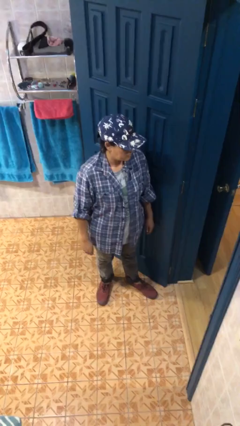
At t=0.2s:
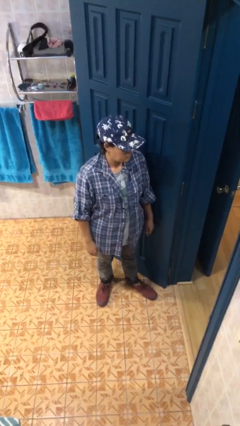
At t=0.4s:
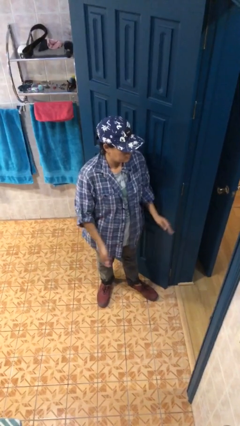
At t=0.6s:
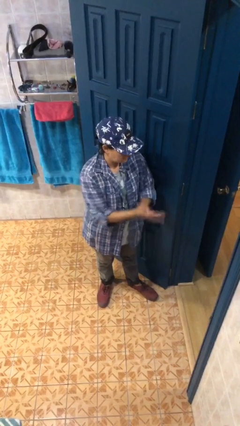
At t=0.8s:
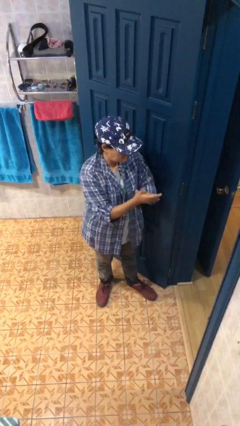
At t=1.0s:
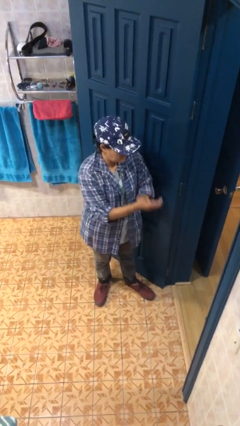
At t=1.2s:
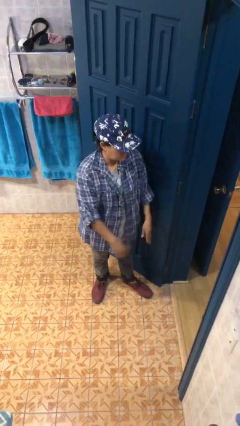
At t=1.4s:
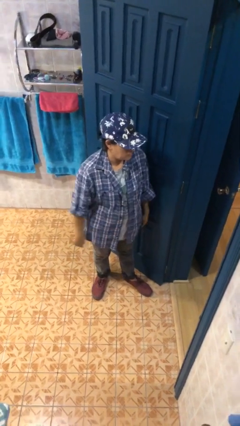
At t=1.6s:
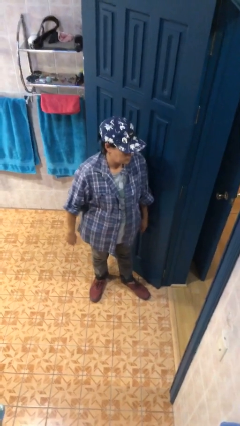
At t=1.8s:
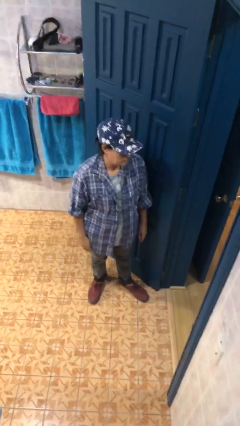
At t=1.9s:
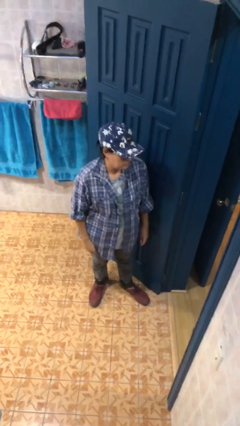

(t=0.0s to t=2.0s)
person claps hands

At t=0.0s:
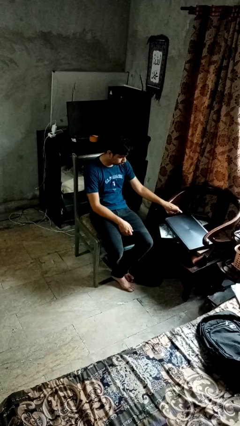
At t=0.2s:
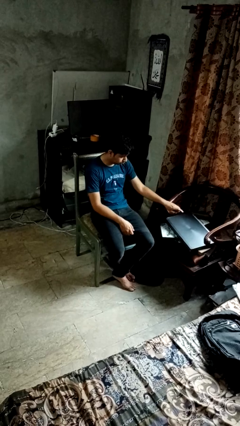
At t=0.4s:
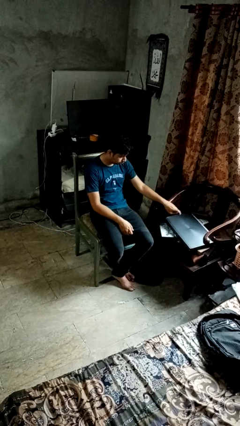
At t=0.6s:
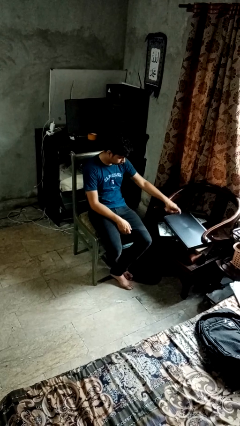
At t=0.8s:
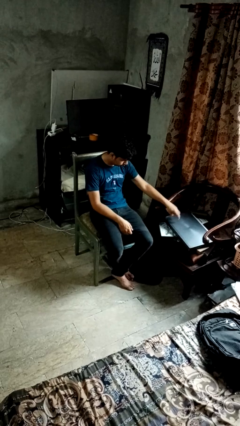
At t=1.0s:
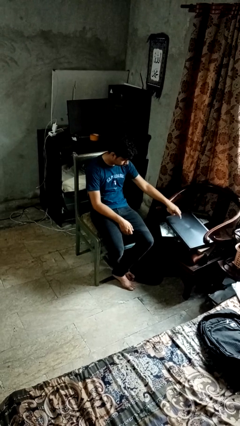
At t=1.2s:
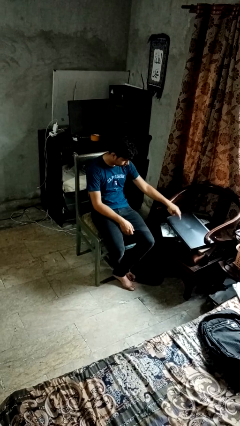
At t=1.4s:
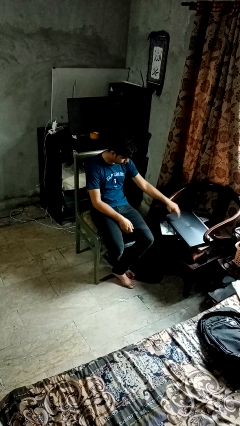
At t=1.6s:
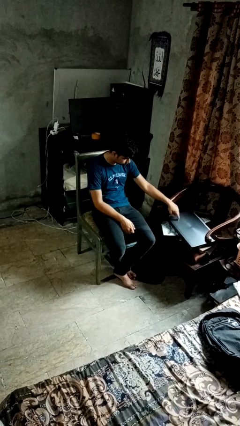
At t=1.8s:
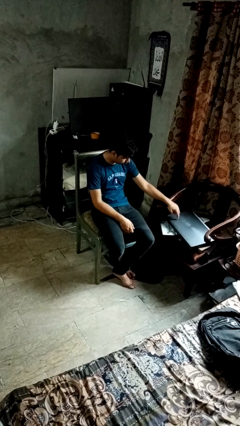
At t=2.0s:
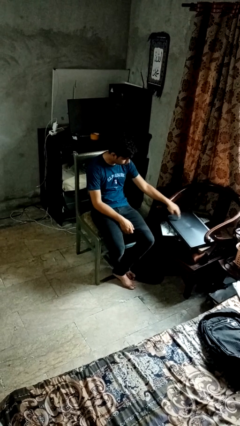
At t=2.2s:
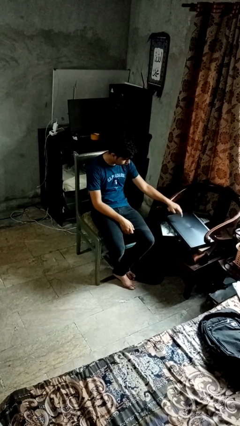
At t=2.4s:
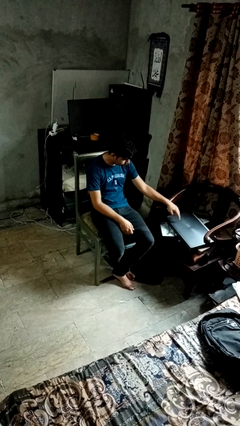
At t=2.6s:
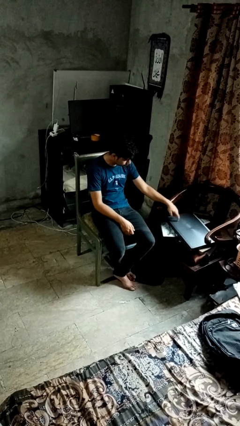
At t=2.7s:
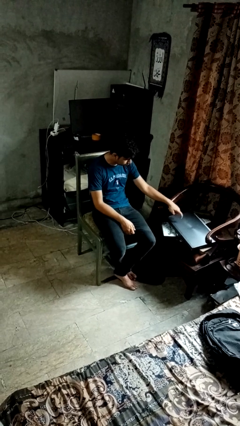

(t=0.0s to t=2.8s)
person taps object with finger

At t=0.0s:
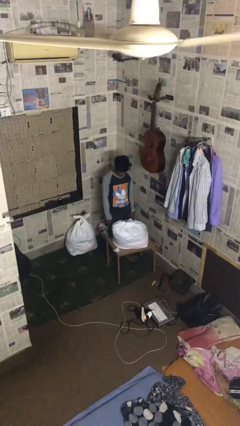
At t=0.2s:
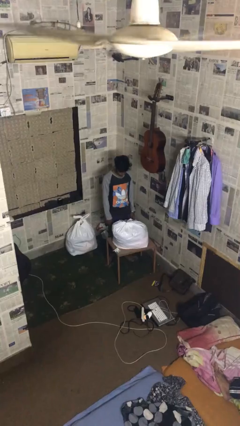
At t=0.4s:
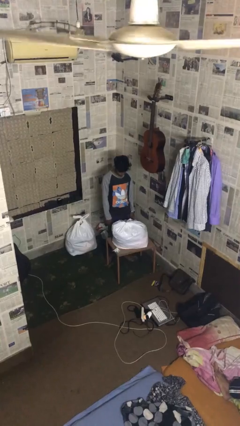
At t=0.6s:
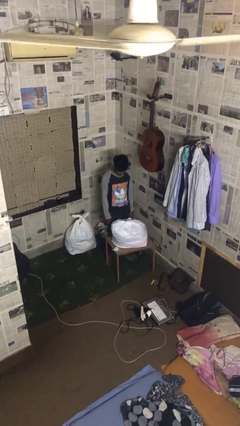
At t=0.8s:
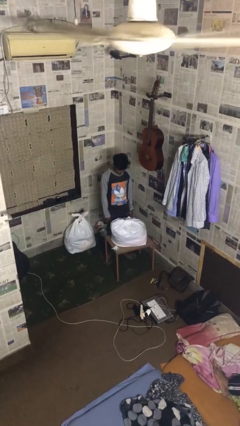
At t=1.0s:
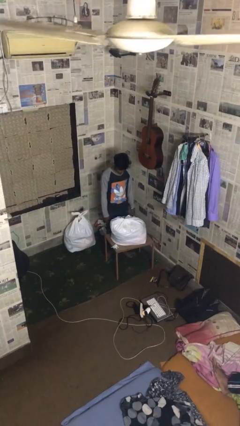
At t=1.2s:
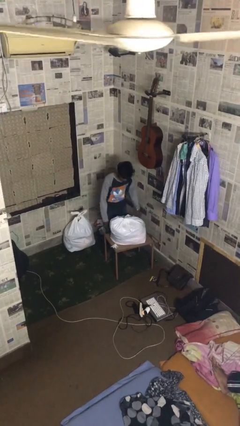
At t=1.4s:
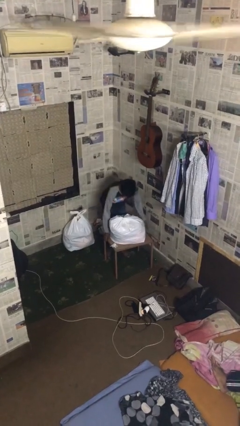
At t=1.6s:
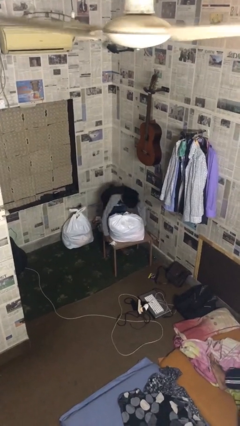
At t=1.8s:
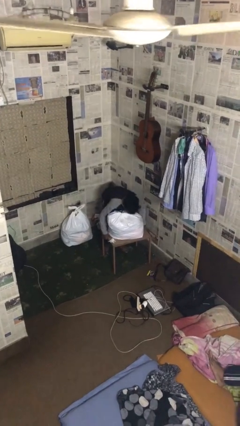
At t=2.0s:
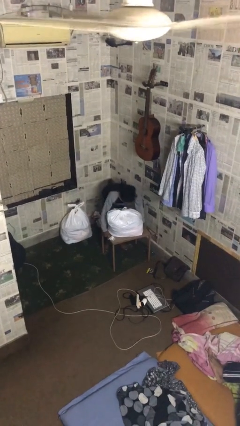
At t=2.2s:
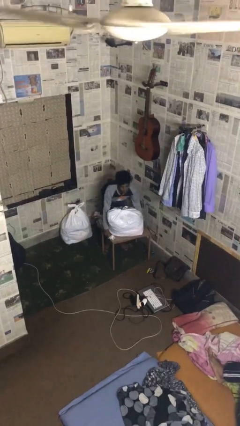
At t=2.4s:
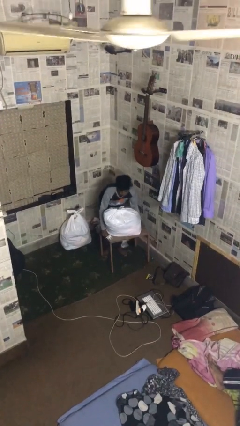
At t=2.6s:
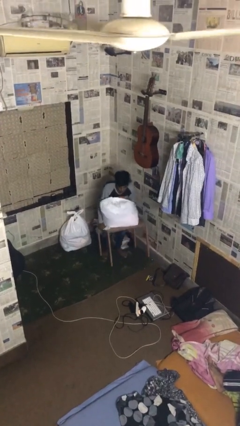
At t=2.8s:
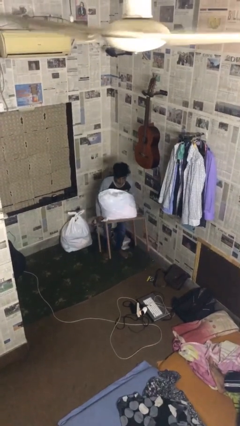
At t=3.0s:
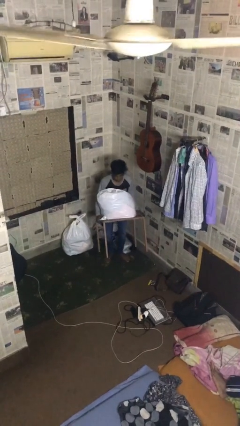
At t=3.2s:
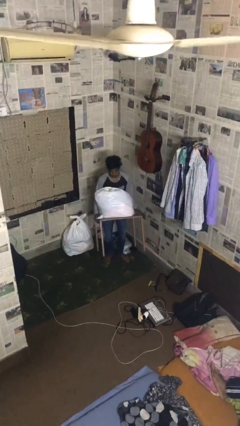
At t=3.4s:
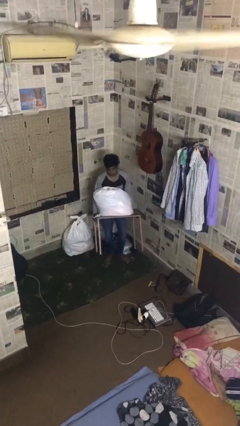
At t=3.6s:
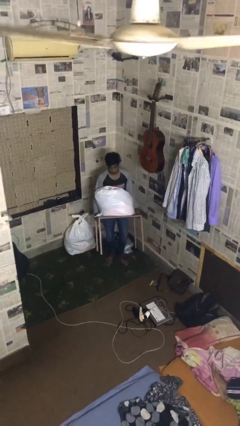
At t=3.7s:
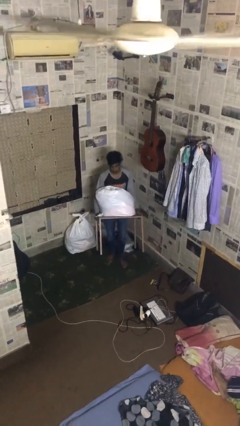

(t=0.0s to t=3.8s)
person picks up object from floor

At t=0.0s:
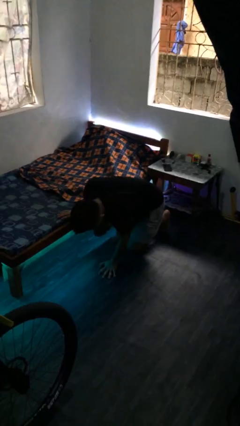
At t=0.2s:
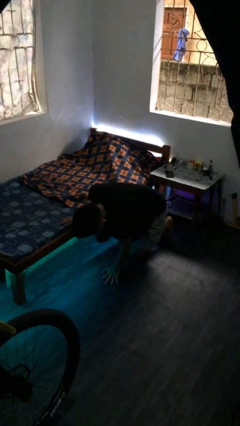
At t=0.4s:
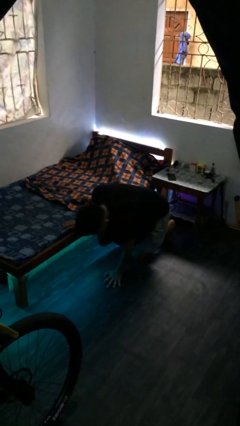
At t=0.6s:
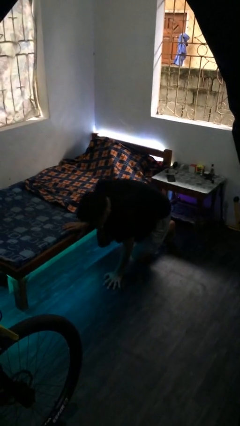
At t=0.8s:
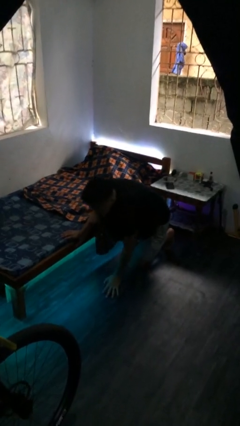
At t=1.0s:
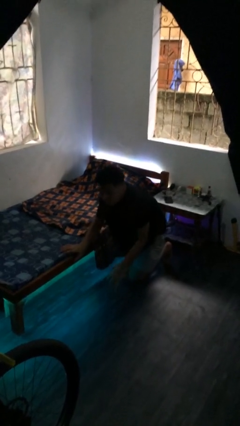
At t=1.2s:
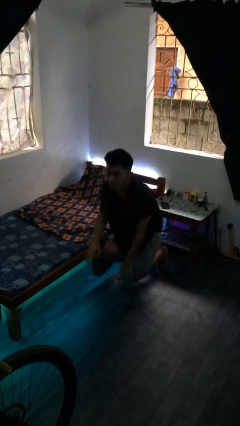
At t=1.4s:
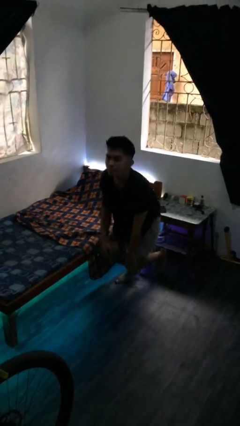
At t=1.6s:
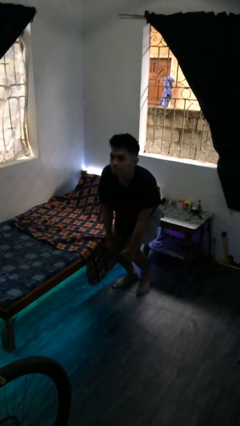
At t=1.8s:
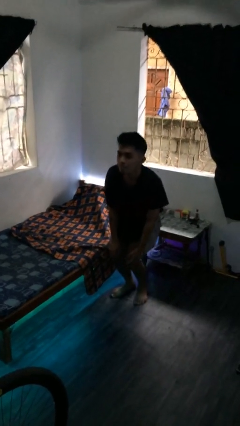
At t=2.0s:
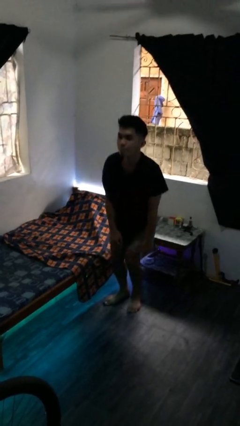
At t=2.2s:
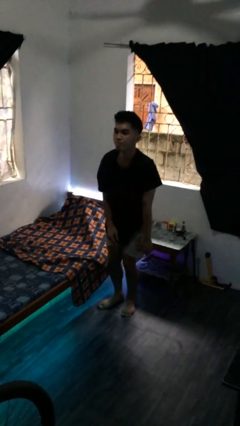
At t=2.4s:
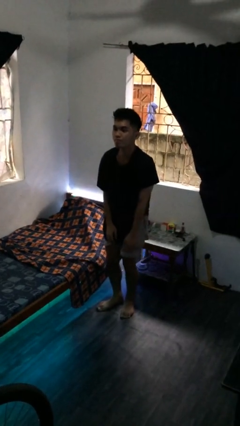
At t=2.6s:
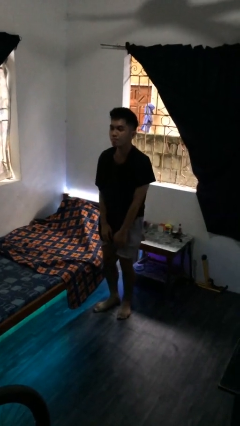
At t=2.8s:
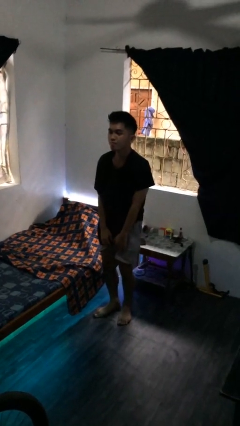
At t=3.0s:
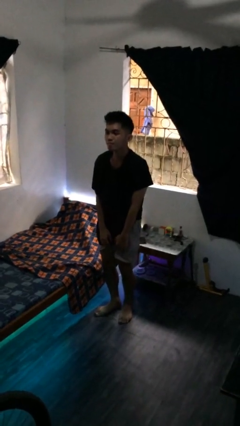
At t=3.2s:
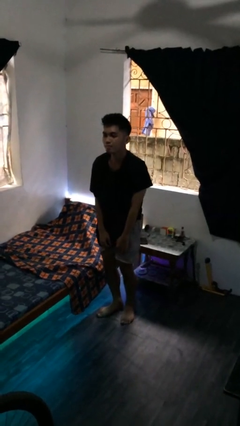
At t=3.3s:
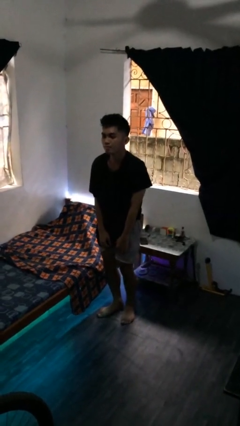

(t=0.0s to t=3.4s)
person stands up from floor

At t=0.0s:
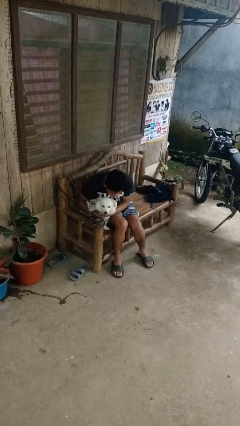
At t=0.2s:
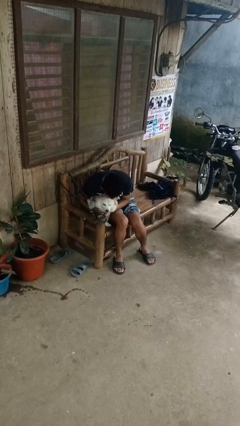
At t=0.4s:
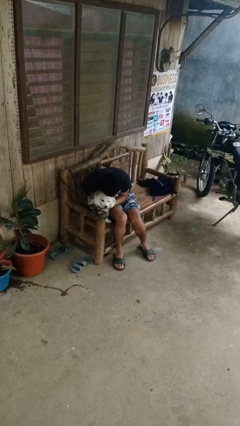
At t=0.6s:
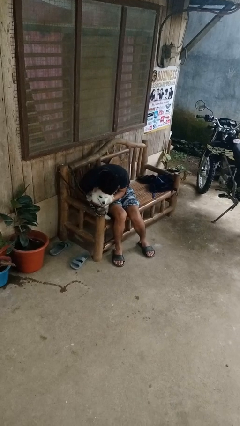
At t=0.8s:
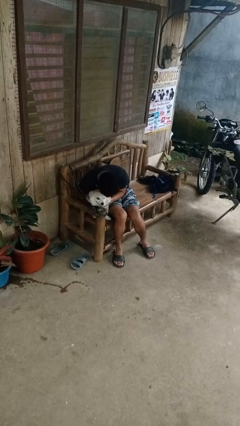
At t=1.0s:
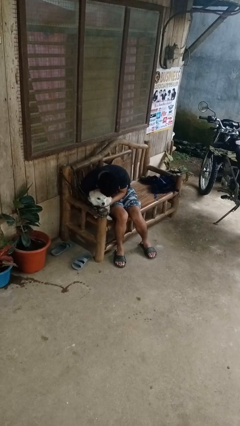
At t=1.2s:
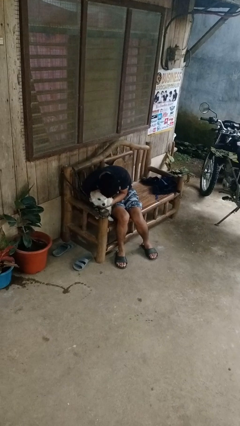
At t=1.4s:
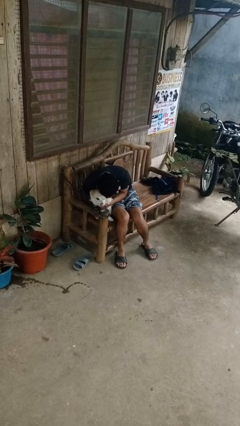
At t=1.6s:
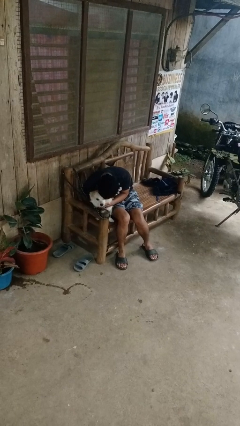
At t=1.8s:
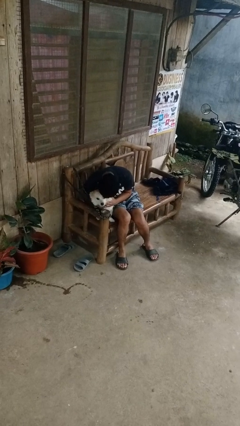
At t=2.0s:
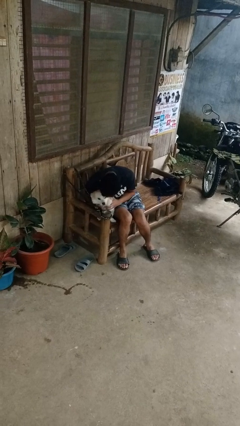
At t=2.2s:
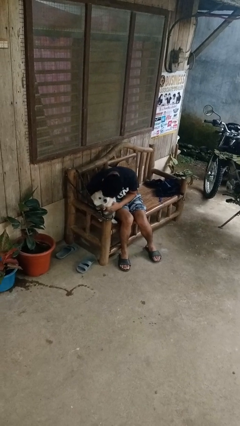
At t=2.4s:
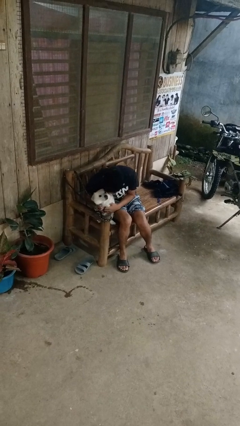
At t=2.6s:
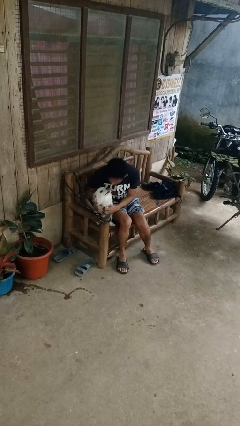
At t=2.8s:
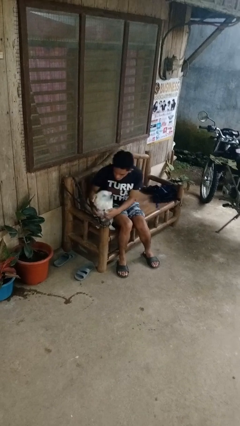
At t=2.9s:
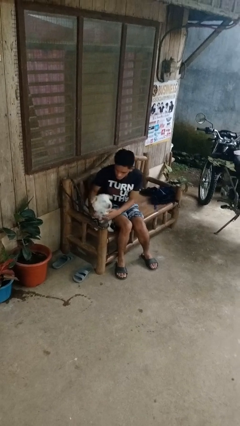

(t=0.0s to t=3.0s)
person hugs dog

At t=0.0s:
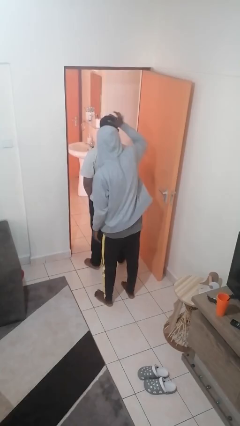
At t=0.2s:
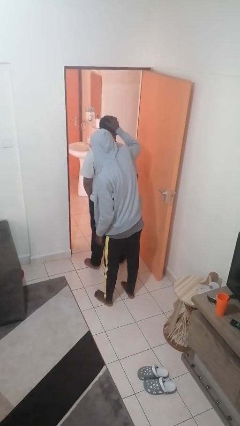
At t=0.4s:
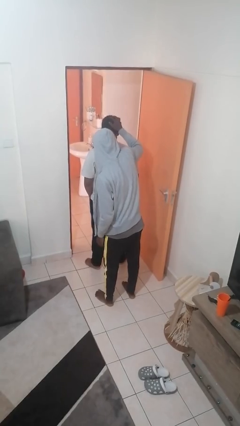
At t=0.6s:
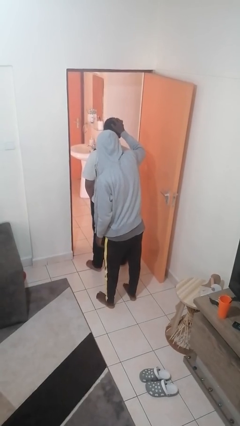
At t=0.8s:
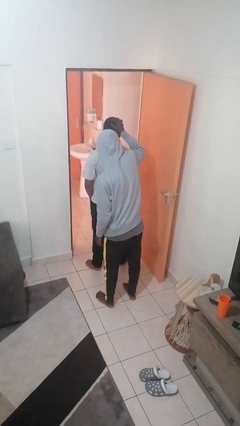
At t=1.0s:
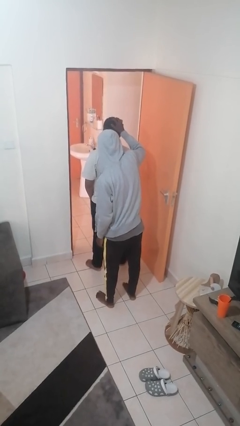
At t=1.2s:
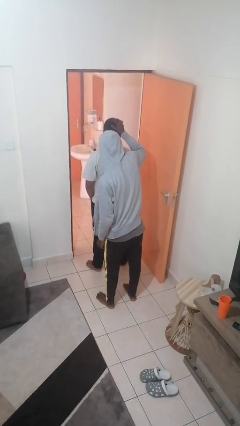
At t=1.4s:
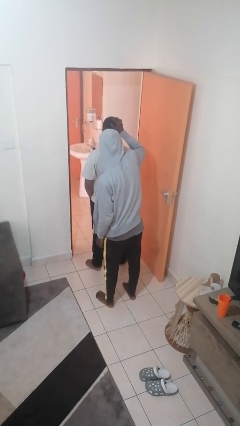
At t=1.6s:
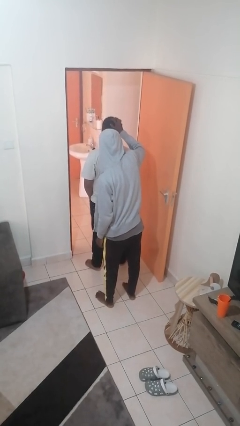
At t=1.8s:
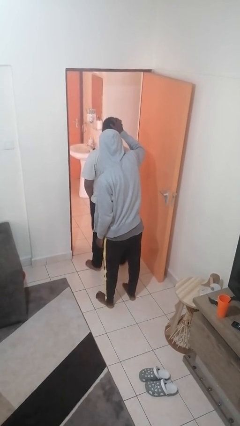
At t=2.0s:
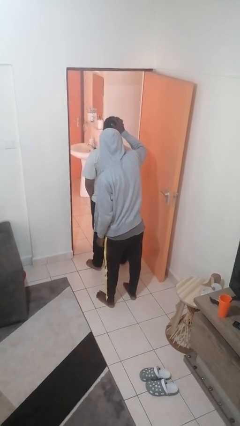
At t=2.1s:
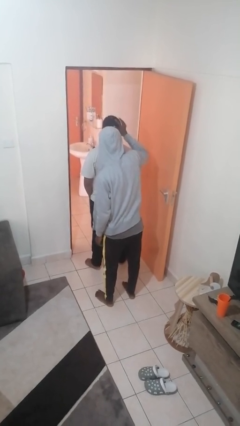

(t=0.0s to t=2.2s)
person grabs person by hair
